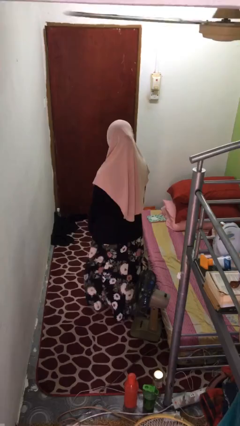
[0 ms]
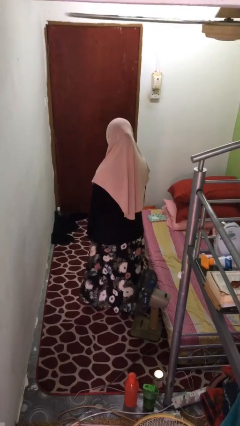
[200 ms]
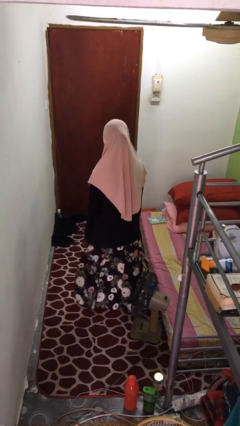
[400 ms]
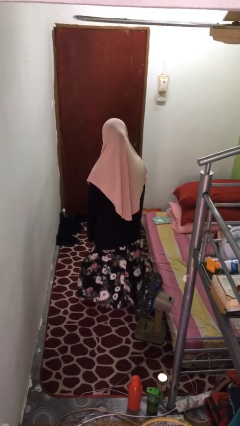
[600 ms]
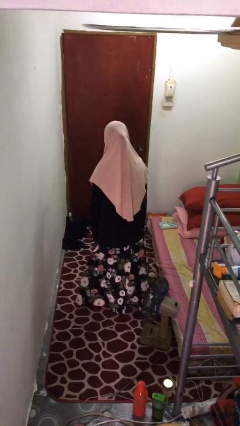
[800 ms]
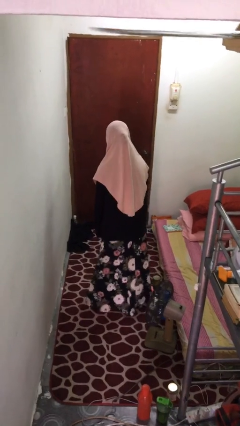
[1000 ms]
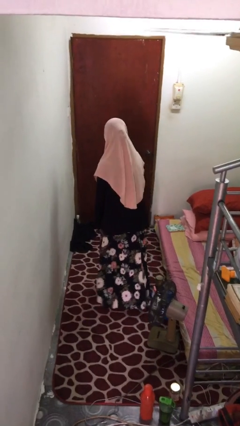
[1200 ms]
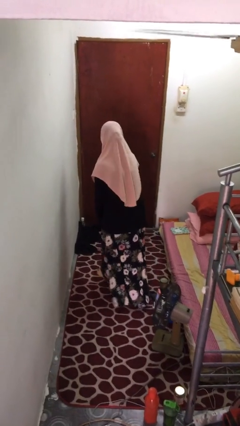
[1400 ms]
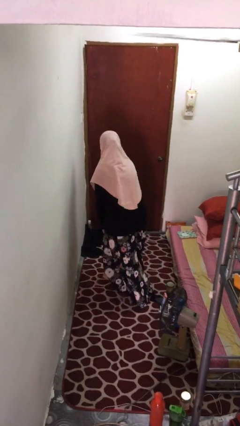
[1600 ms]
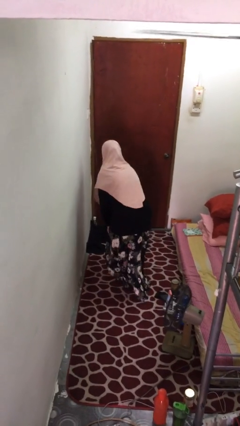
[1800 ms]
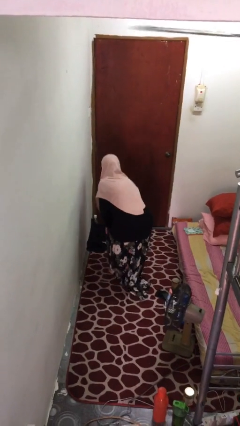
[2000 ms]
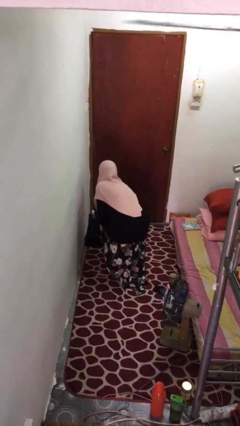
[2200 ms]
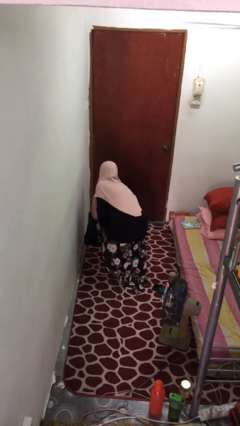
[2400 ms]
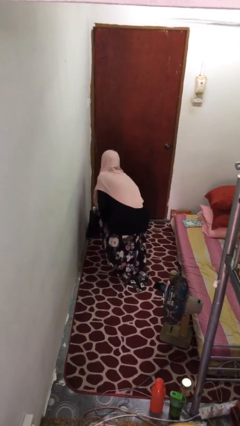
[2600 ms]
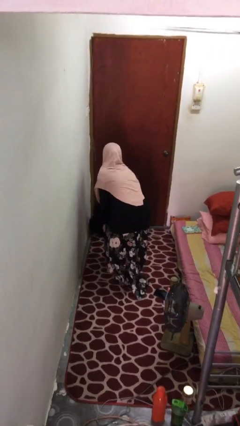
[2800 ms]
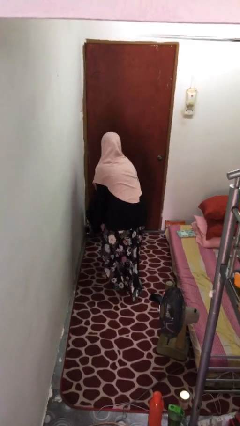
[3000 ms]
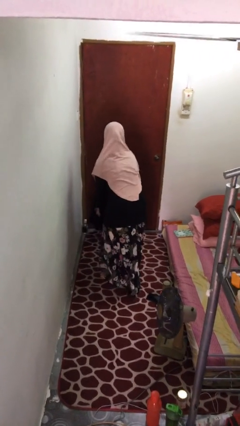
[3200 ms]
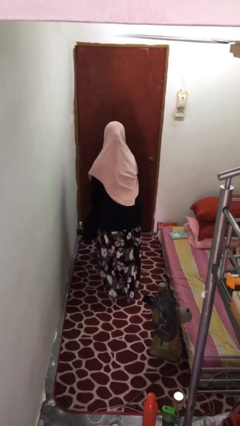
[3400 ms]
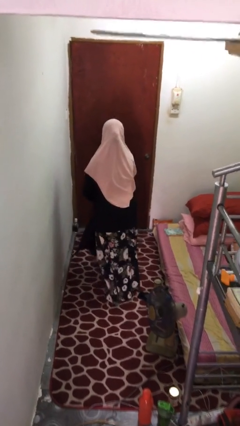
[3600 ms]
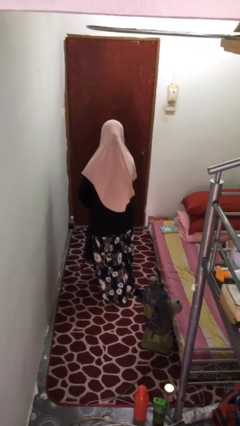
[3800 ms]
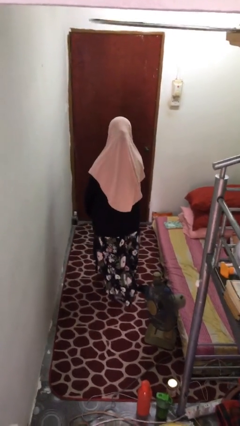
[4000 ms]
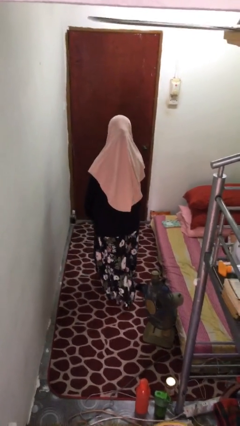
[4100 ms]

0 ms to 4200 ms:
person picks up object from floor

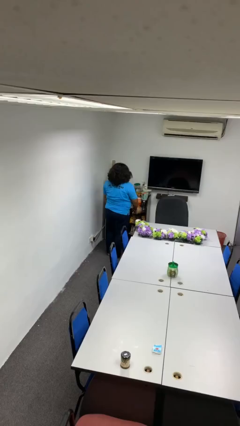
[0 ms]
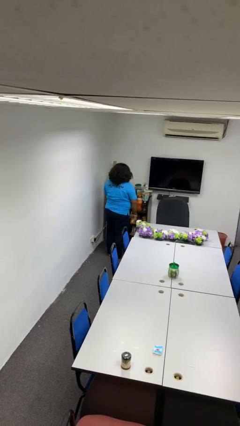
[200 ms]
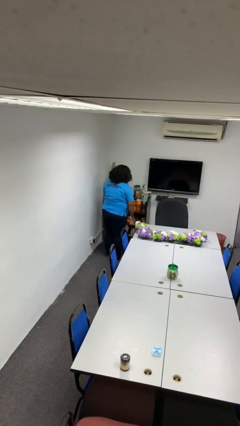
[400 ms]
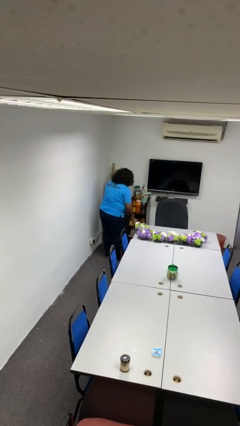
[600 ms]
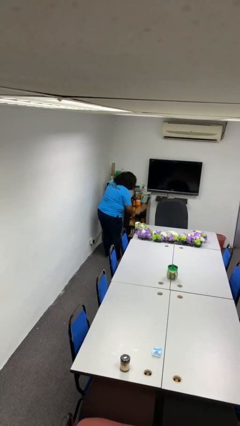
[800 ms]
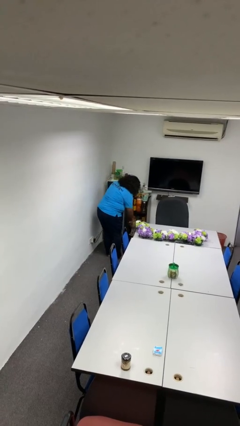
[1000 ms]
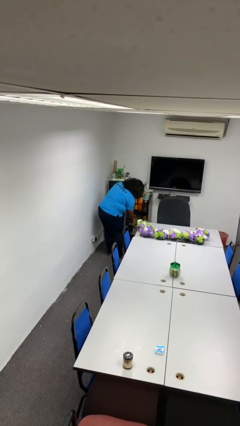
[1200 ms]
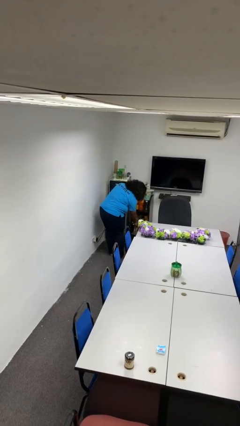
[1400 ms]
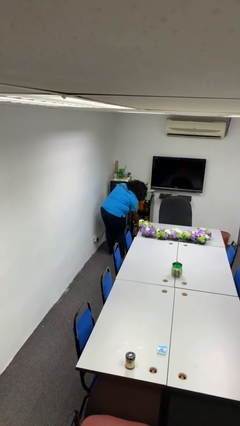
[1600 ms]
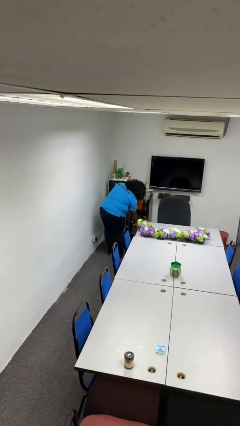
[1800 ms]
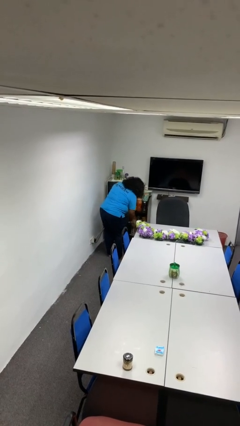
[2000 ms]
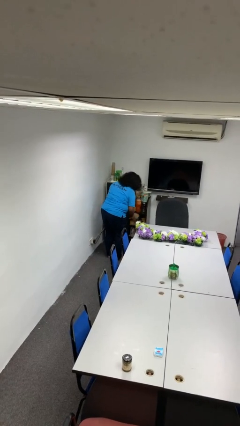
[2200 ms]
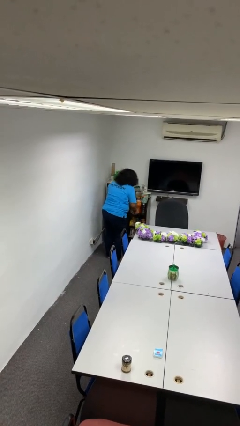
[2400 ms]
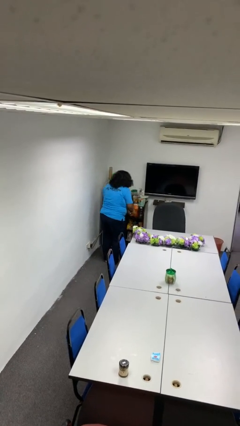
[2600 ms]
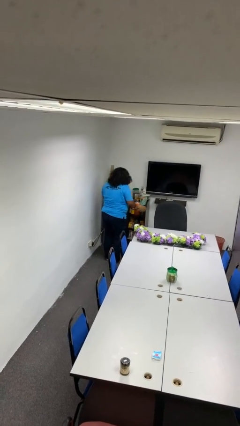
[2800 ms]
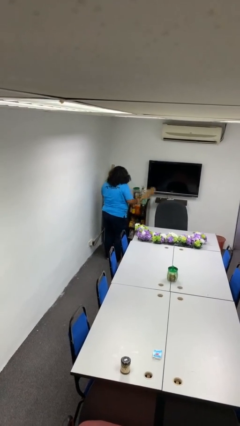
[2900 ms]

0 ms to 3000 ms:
person dusts furniture

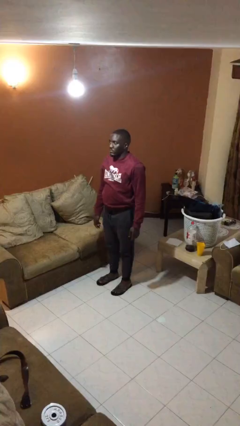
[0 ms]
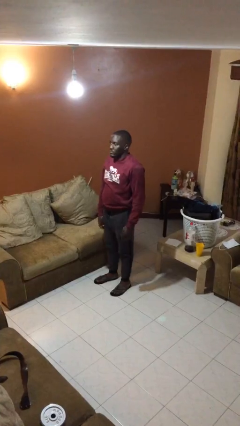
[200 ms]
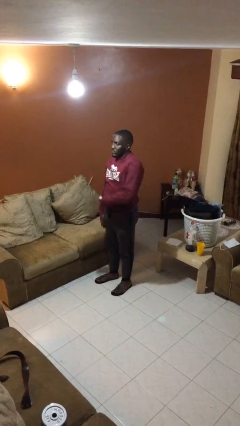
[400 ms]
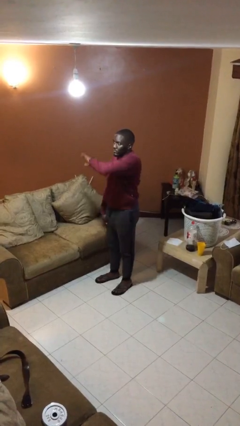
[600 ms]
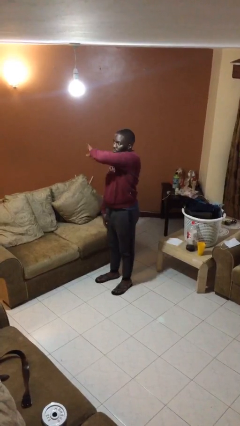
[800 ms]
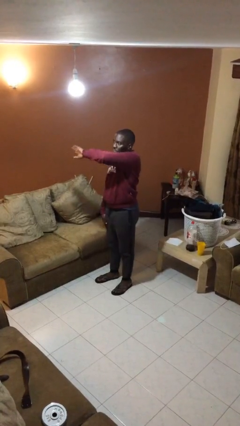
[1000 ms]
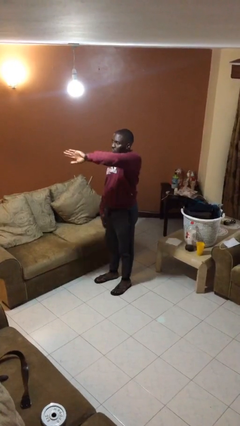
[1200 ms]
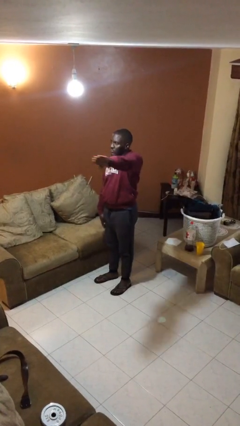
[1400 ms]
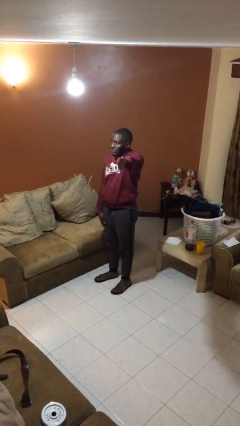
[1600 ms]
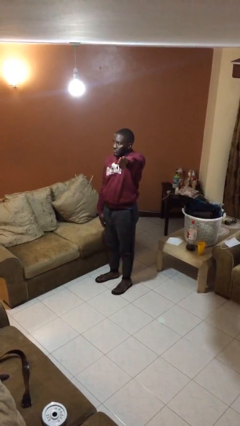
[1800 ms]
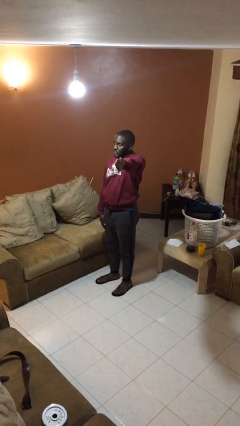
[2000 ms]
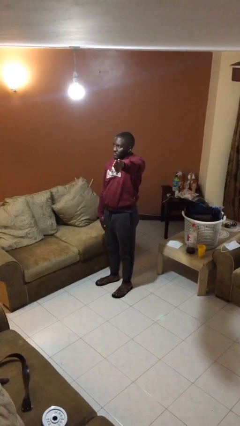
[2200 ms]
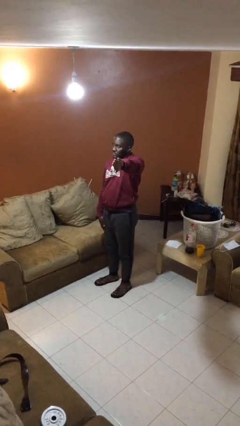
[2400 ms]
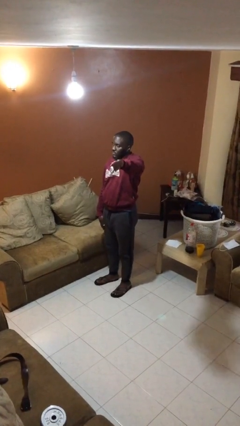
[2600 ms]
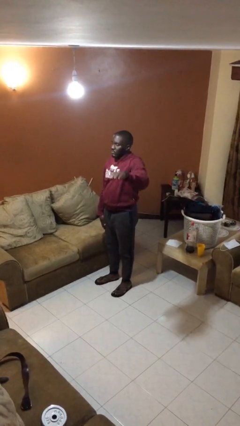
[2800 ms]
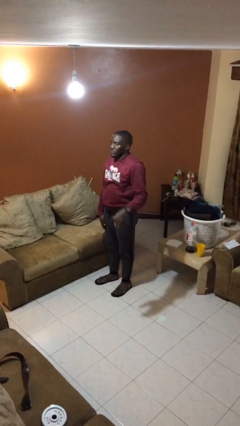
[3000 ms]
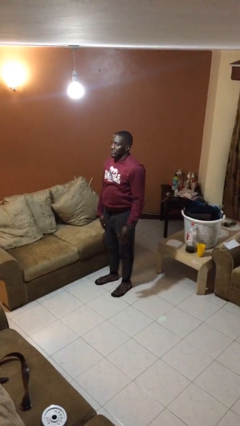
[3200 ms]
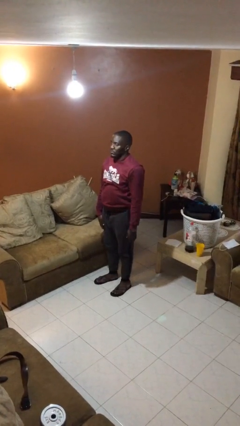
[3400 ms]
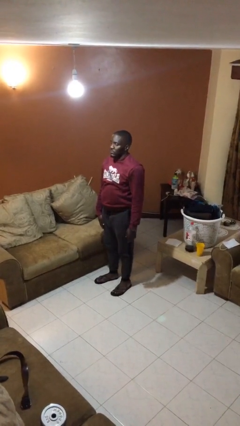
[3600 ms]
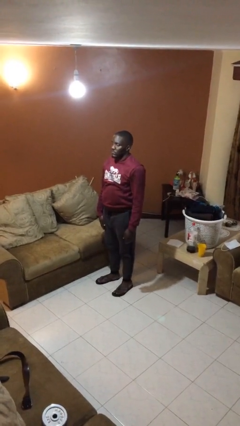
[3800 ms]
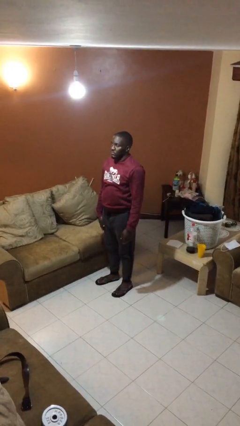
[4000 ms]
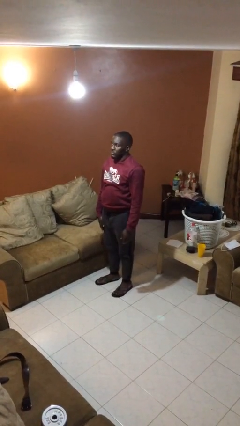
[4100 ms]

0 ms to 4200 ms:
person gestures swipe left

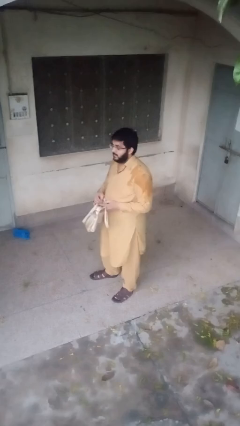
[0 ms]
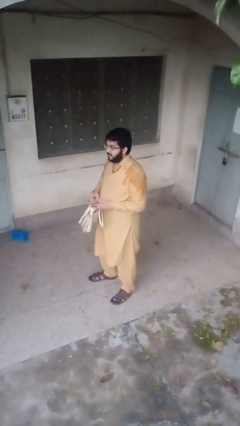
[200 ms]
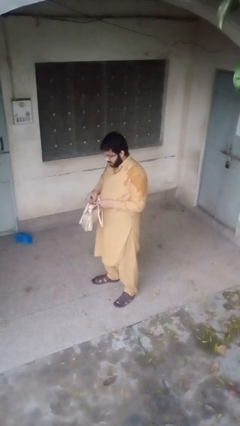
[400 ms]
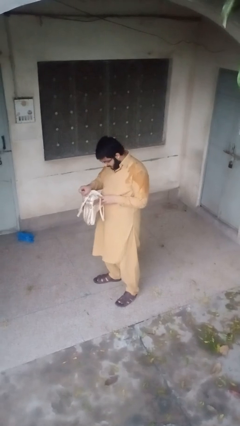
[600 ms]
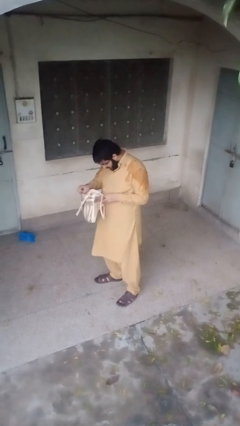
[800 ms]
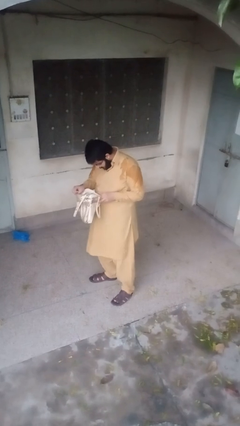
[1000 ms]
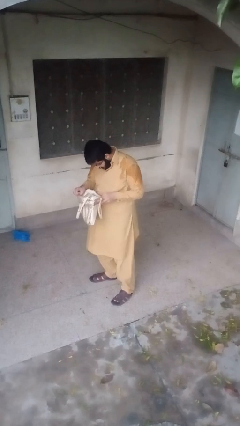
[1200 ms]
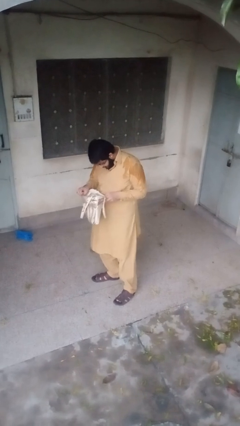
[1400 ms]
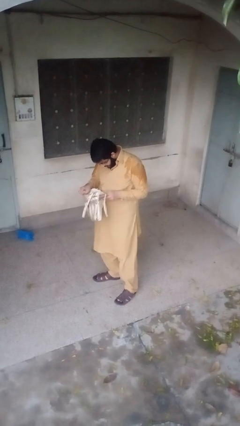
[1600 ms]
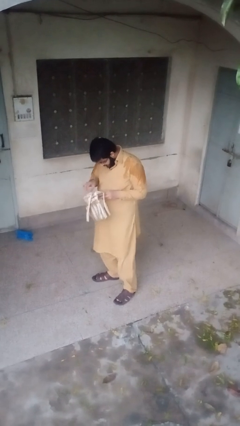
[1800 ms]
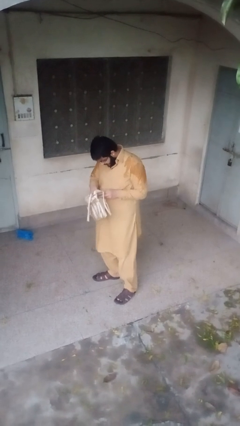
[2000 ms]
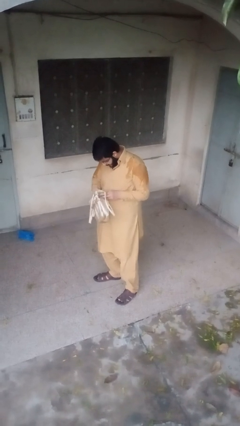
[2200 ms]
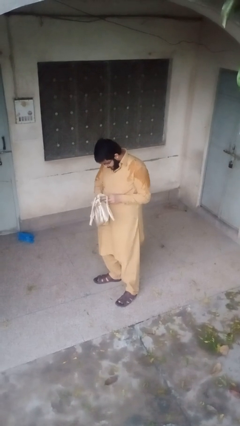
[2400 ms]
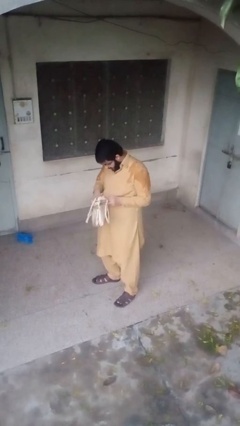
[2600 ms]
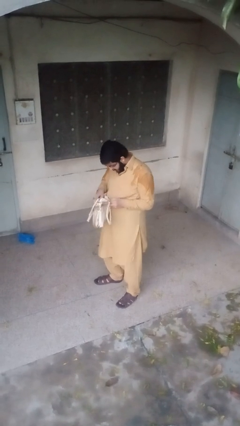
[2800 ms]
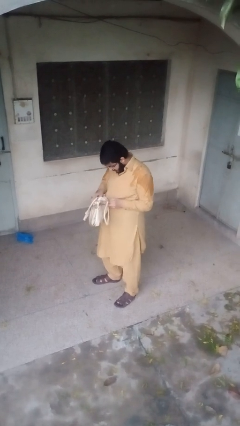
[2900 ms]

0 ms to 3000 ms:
person searches in purse

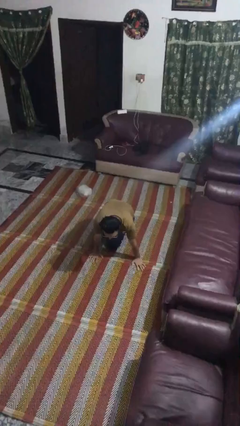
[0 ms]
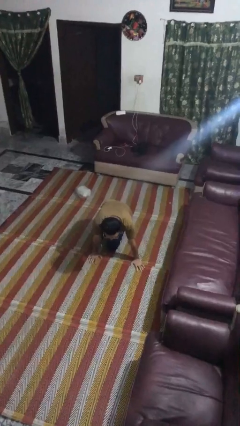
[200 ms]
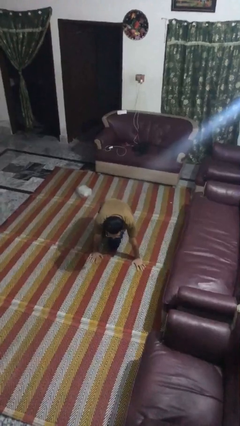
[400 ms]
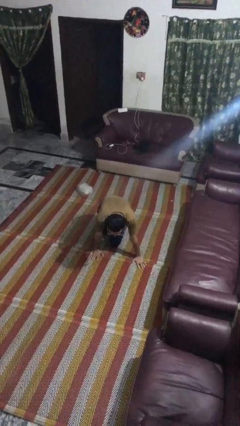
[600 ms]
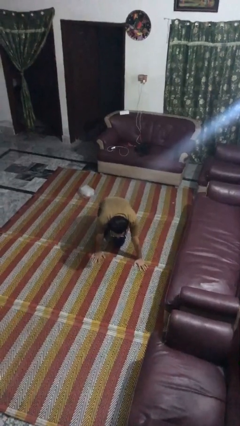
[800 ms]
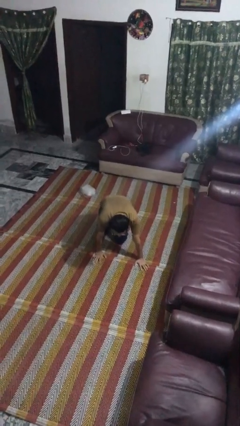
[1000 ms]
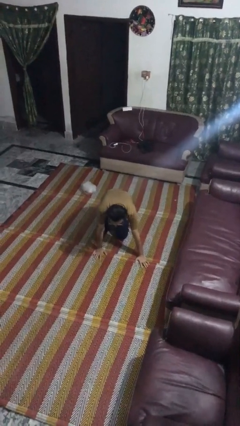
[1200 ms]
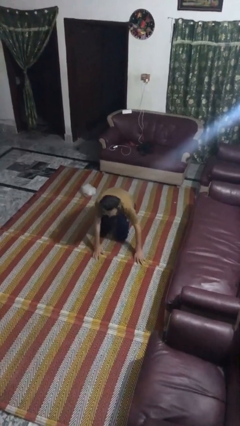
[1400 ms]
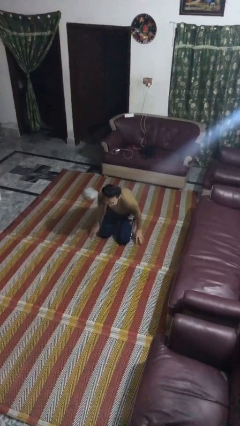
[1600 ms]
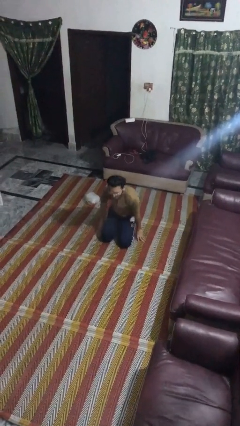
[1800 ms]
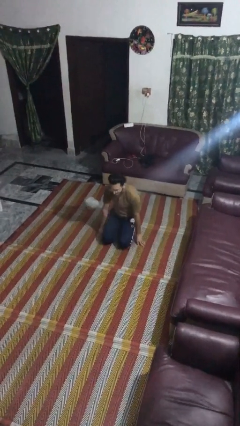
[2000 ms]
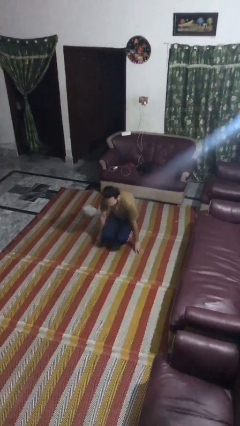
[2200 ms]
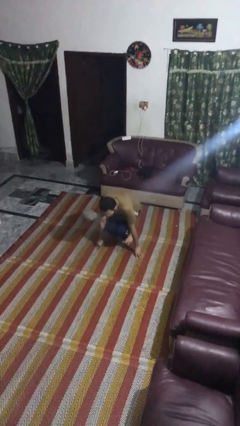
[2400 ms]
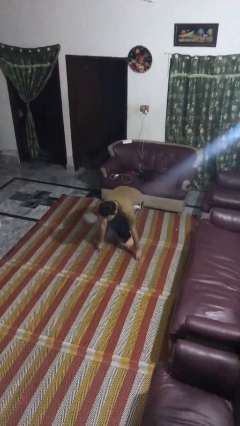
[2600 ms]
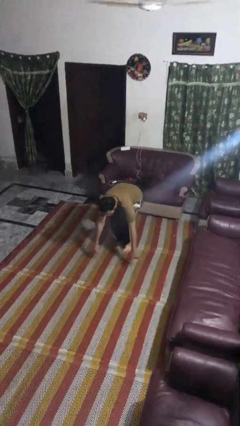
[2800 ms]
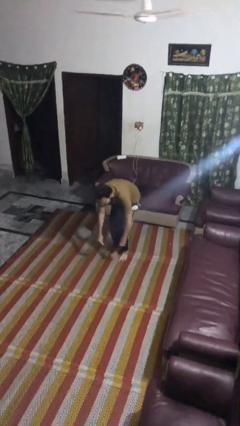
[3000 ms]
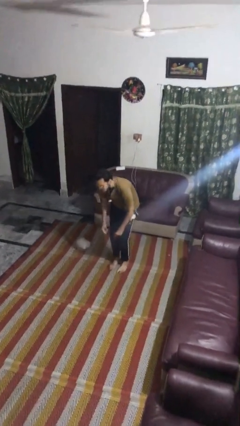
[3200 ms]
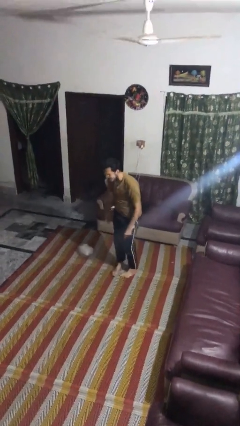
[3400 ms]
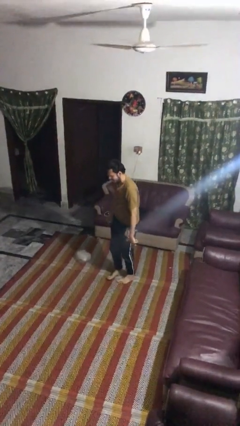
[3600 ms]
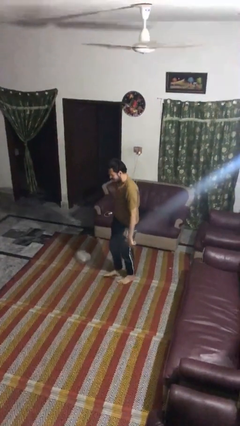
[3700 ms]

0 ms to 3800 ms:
person stands up from floor
